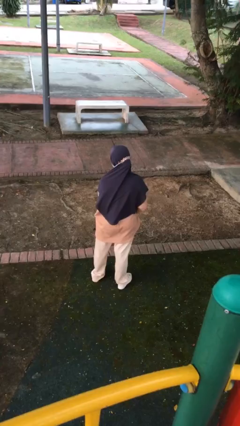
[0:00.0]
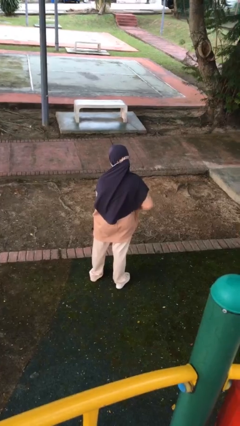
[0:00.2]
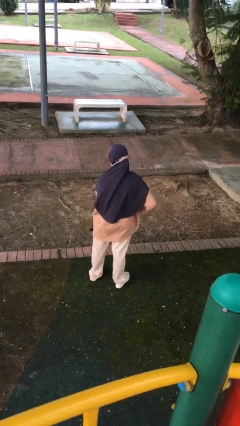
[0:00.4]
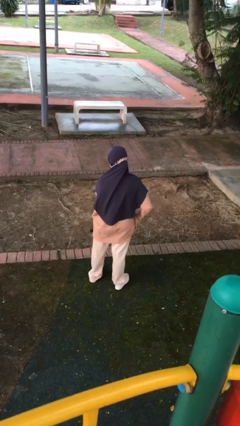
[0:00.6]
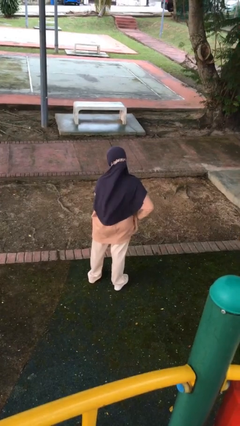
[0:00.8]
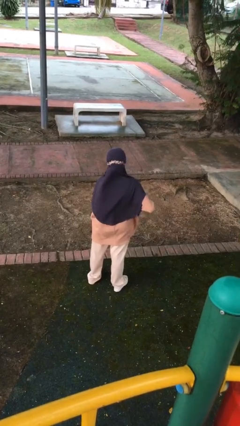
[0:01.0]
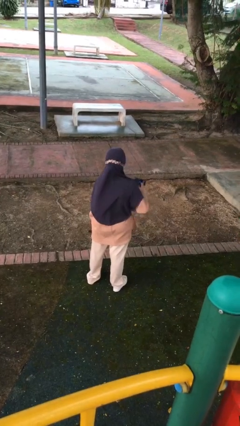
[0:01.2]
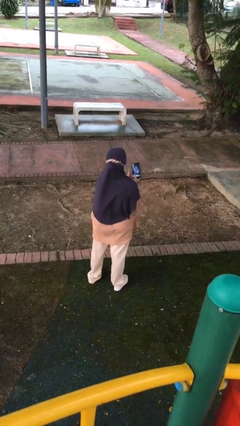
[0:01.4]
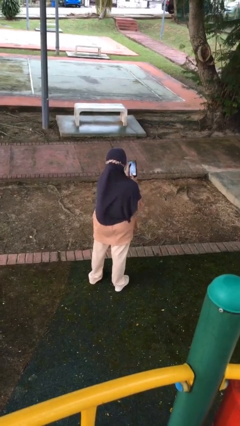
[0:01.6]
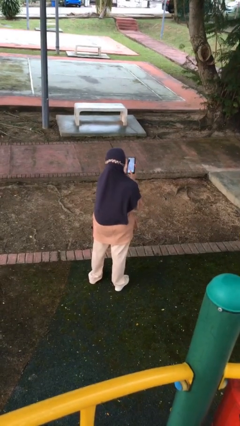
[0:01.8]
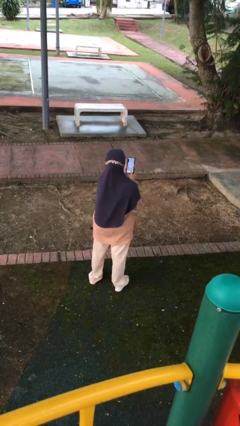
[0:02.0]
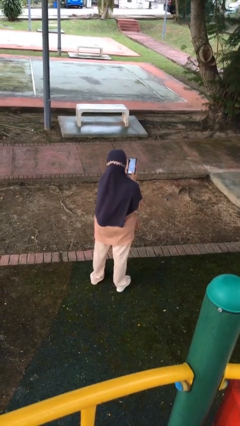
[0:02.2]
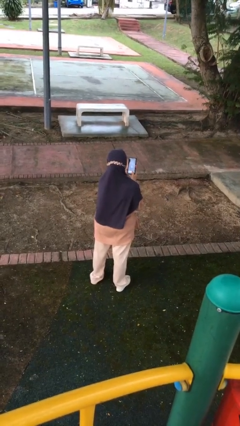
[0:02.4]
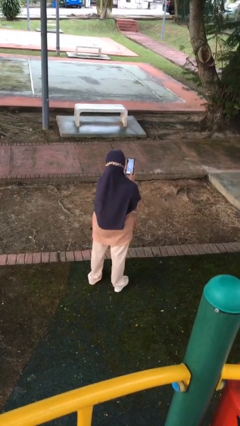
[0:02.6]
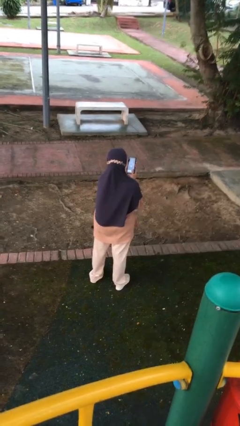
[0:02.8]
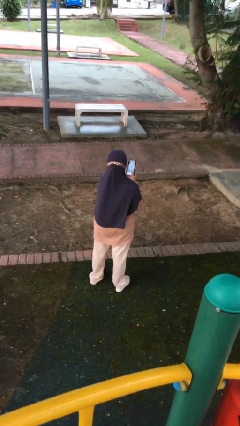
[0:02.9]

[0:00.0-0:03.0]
person takes phone from pocket

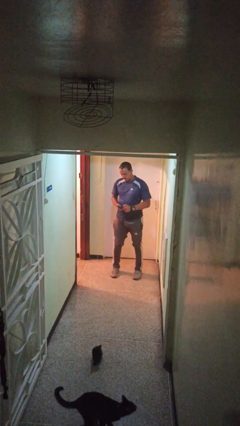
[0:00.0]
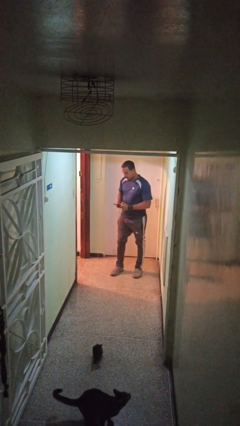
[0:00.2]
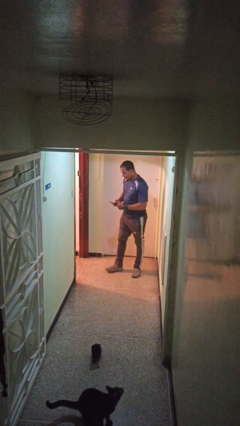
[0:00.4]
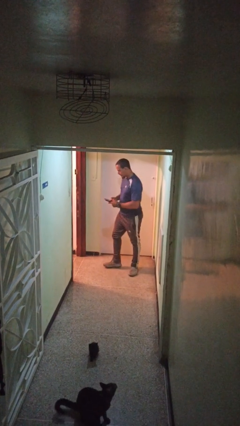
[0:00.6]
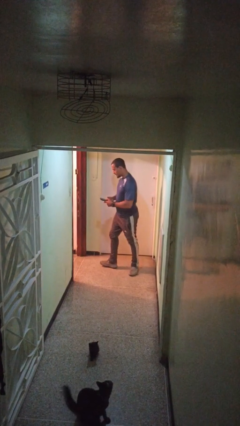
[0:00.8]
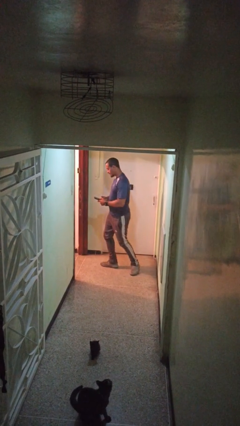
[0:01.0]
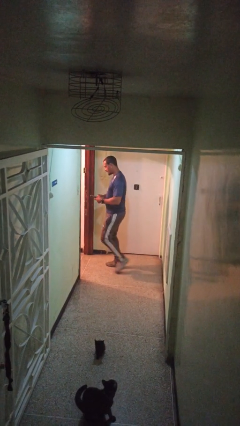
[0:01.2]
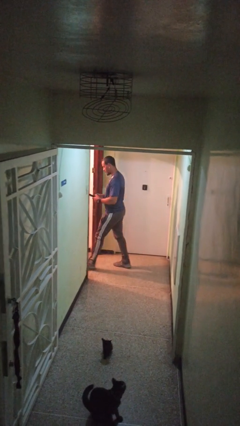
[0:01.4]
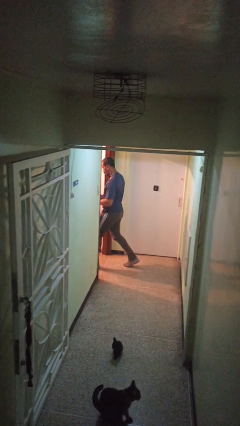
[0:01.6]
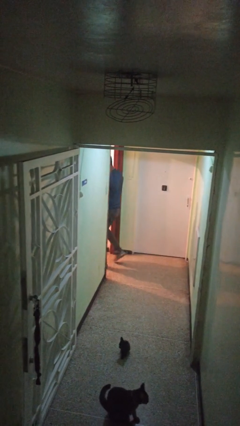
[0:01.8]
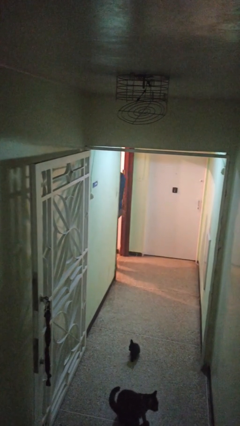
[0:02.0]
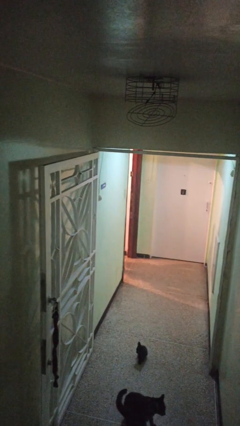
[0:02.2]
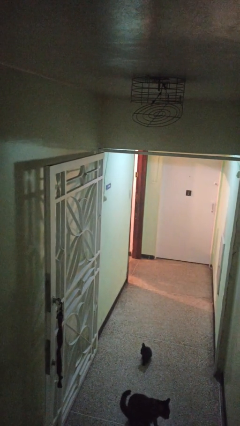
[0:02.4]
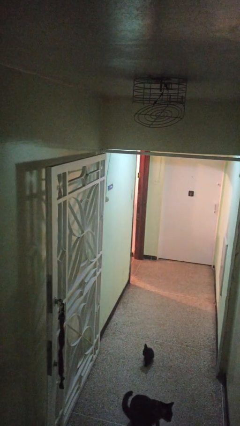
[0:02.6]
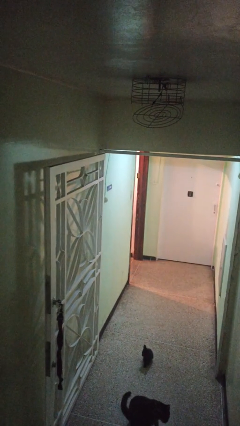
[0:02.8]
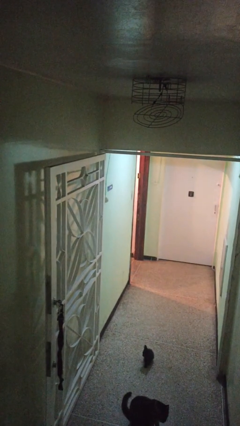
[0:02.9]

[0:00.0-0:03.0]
person exits scene through structure

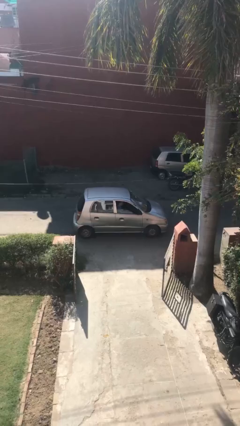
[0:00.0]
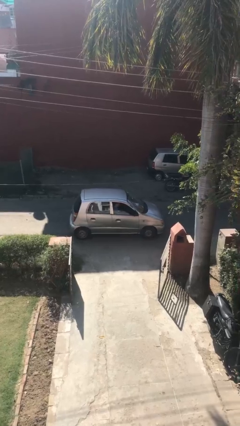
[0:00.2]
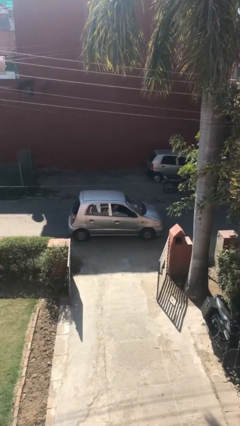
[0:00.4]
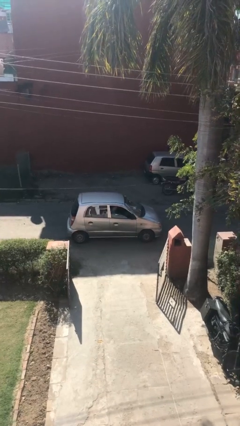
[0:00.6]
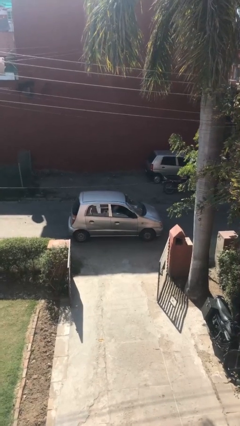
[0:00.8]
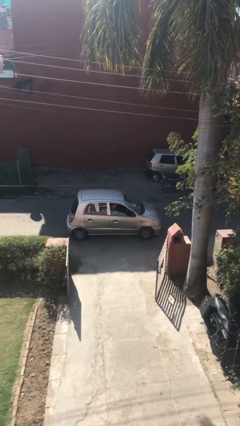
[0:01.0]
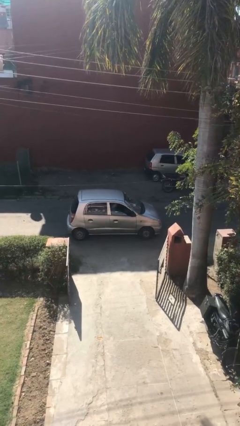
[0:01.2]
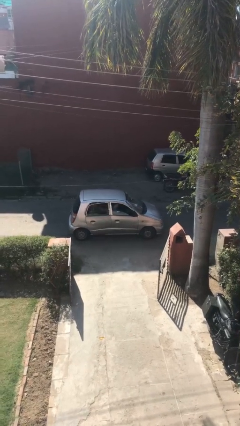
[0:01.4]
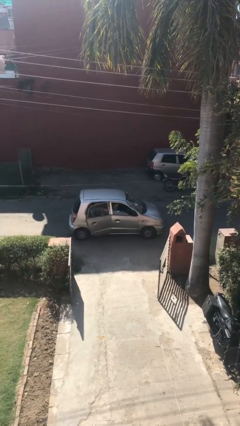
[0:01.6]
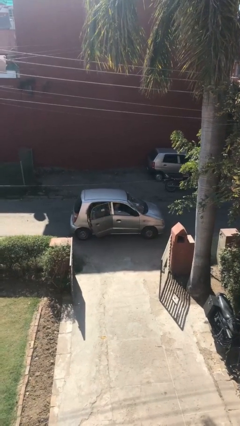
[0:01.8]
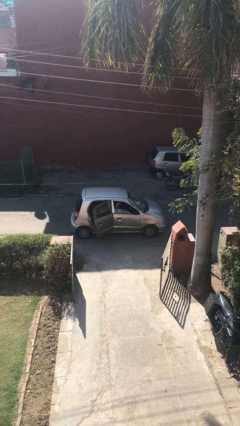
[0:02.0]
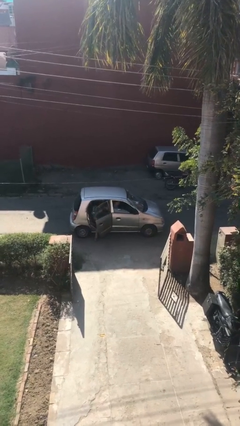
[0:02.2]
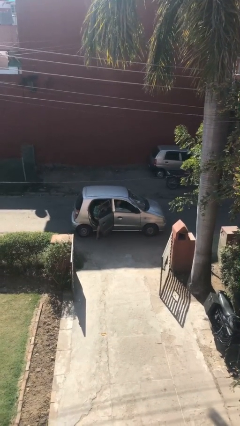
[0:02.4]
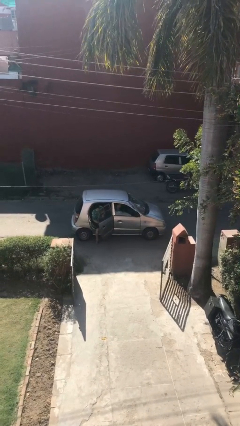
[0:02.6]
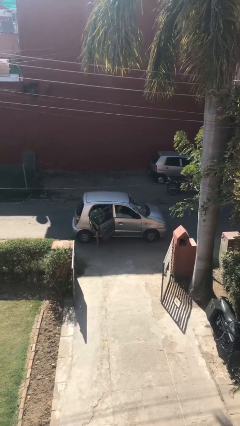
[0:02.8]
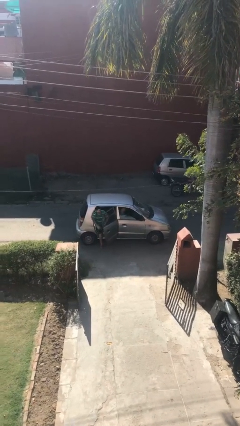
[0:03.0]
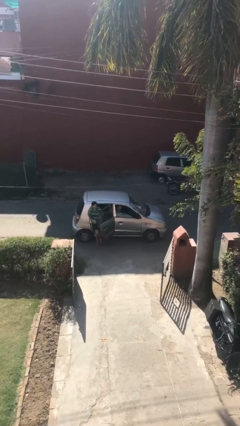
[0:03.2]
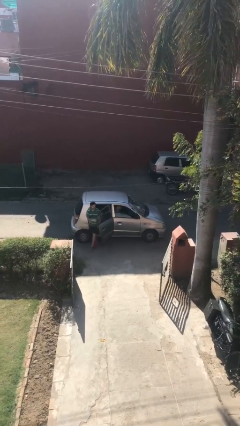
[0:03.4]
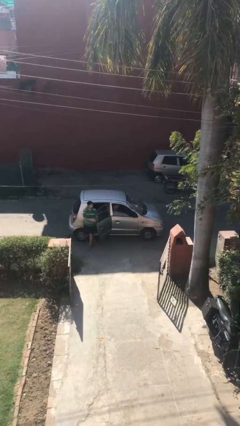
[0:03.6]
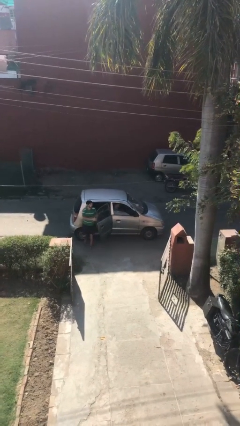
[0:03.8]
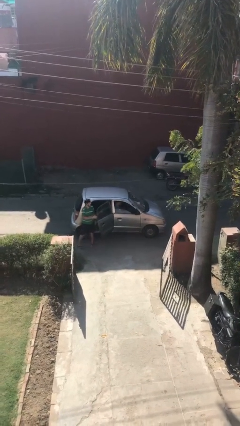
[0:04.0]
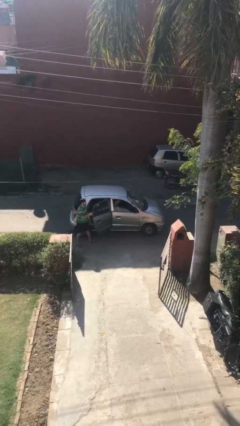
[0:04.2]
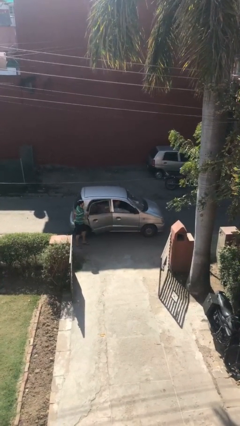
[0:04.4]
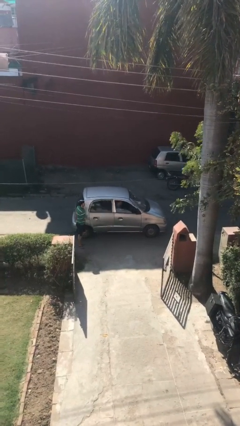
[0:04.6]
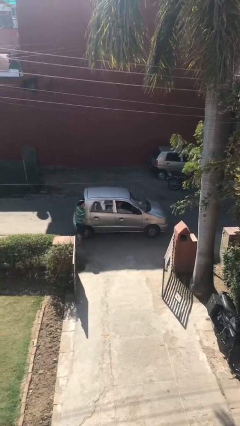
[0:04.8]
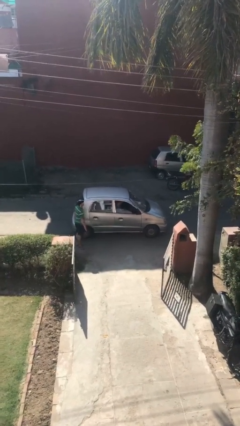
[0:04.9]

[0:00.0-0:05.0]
car drops off person

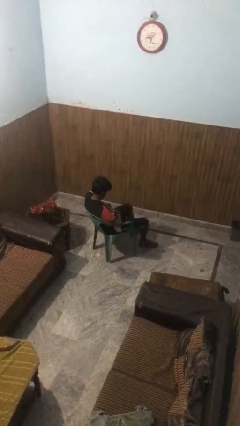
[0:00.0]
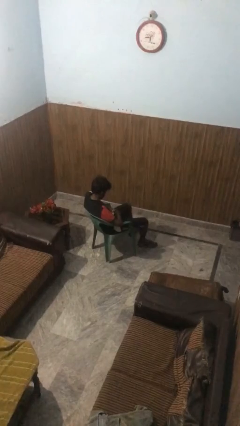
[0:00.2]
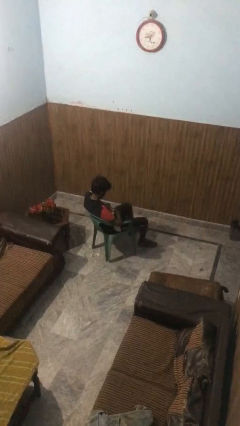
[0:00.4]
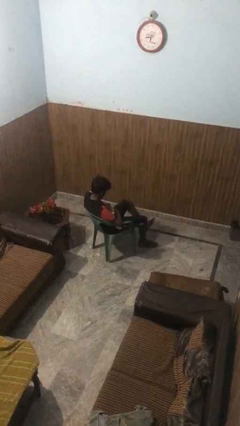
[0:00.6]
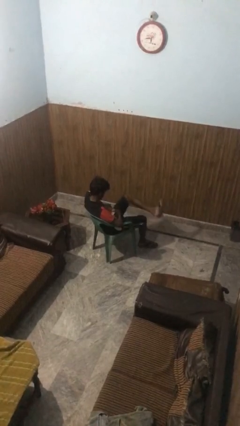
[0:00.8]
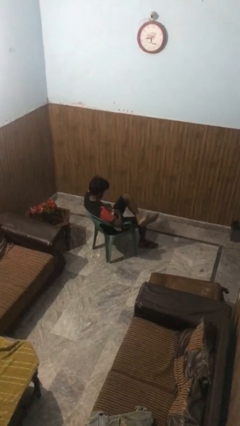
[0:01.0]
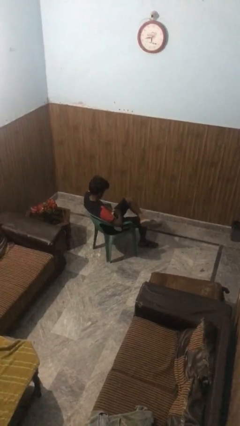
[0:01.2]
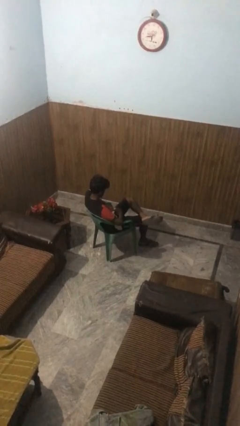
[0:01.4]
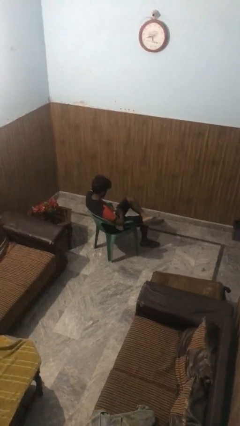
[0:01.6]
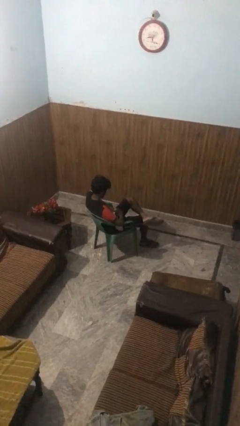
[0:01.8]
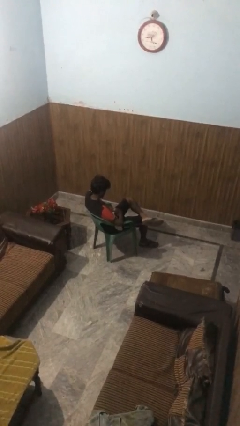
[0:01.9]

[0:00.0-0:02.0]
person crosses legs

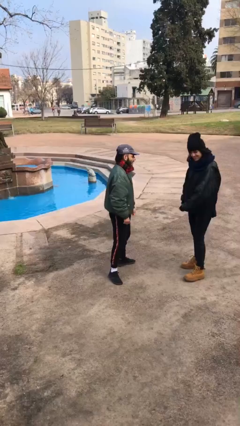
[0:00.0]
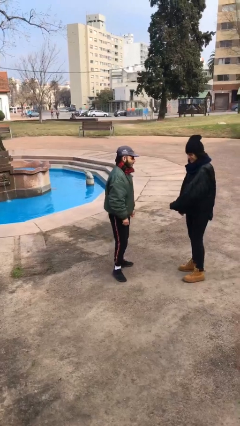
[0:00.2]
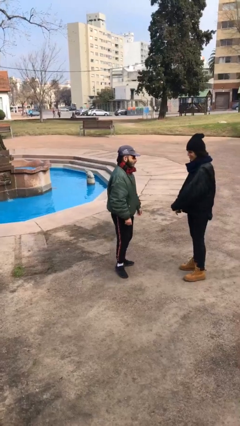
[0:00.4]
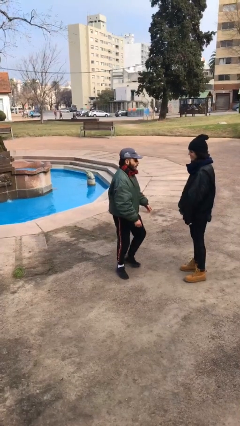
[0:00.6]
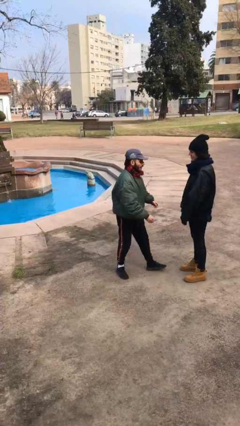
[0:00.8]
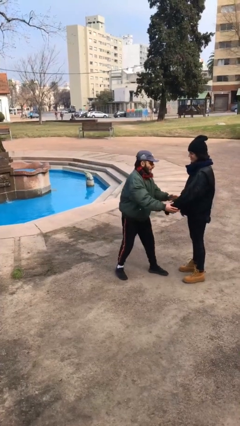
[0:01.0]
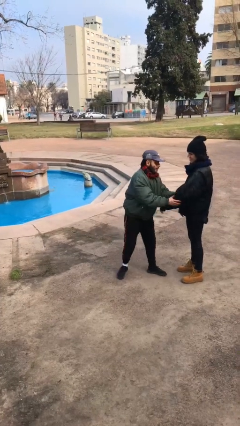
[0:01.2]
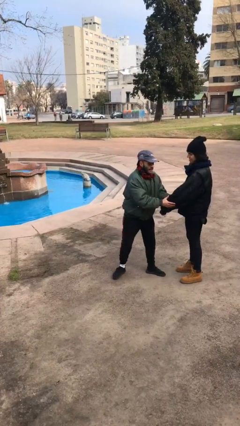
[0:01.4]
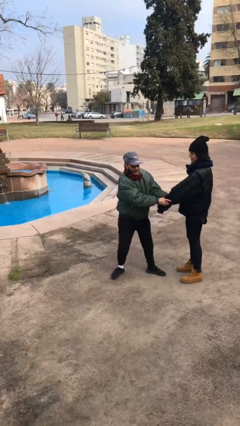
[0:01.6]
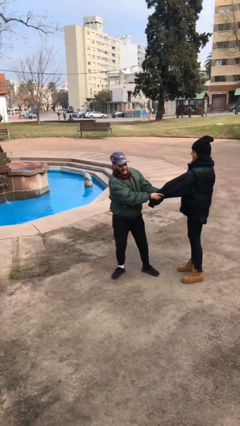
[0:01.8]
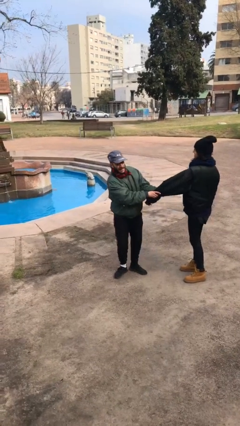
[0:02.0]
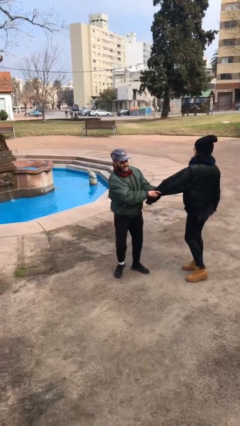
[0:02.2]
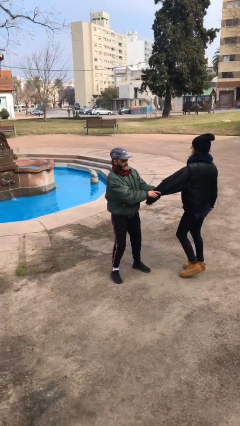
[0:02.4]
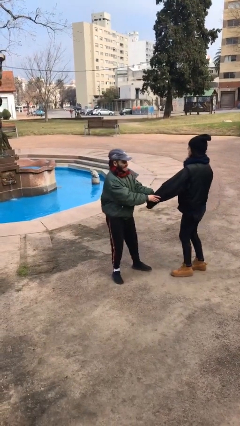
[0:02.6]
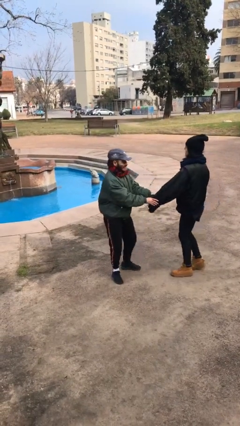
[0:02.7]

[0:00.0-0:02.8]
person grabs person by forearm

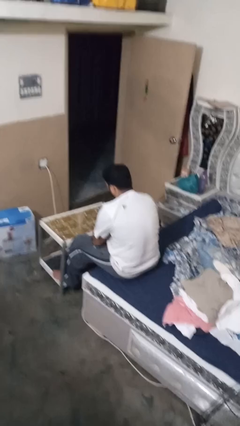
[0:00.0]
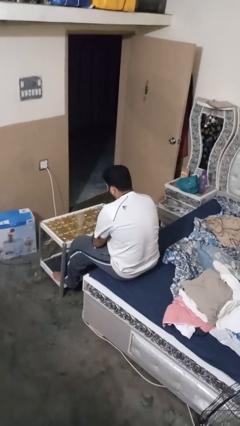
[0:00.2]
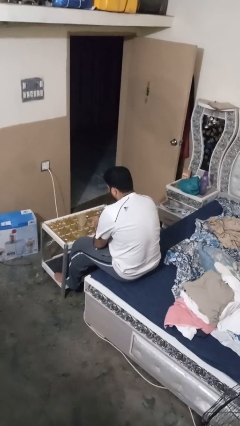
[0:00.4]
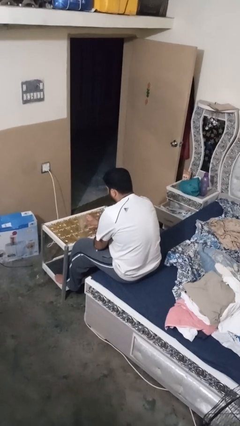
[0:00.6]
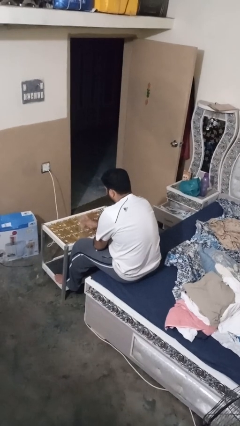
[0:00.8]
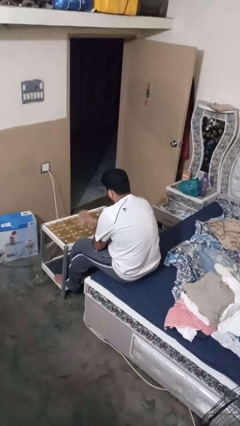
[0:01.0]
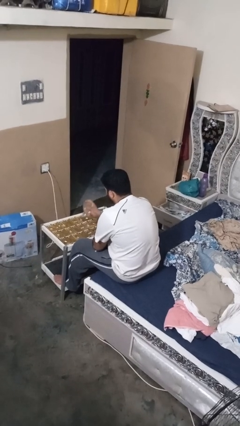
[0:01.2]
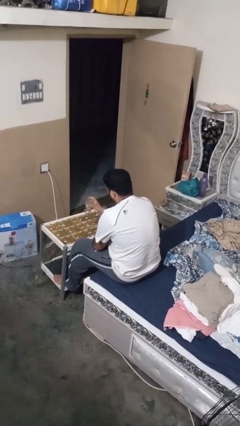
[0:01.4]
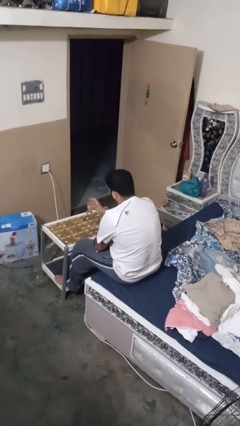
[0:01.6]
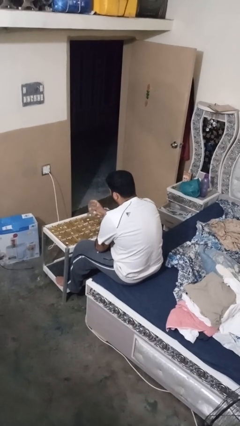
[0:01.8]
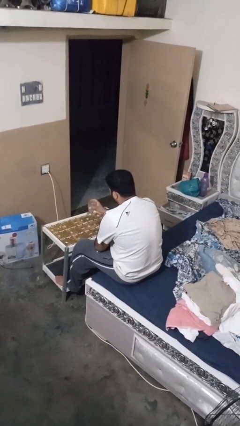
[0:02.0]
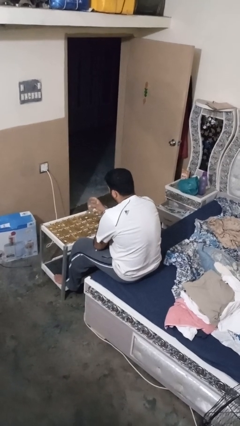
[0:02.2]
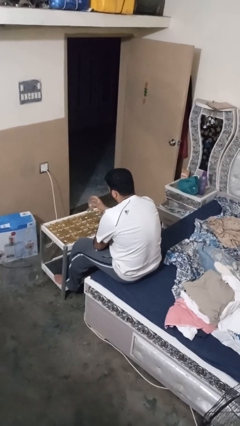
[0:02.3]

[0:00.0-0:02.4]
person picks up object from table
